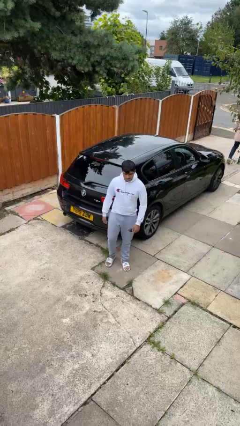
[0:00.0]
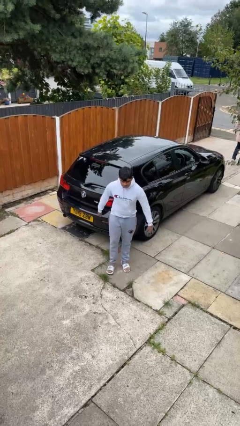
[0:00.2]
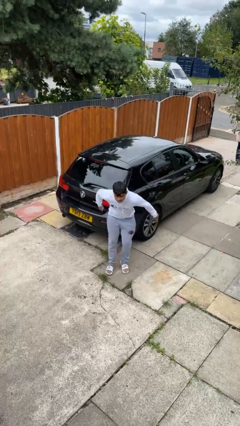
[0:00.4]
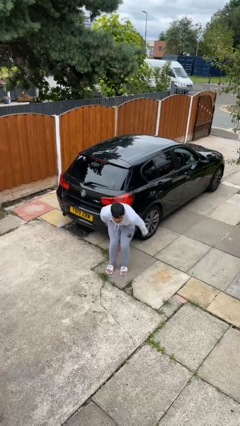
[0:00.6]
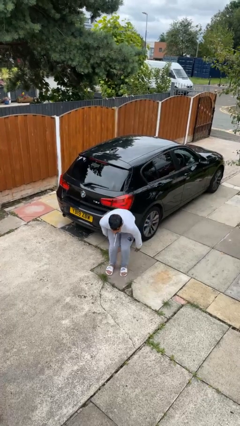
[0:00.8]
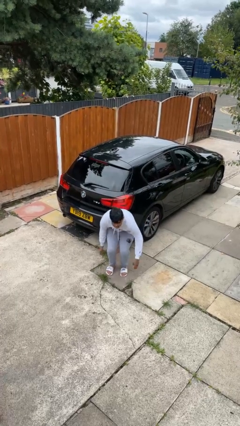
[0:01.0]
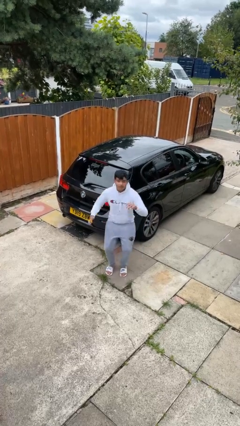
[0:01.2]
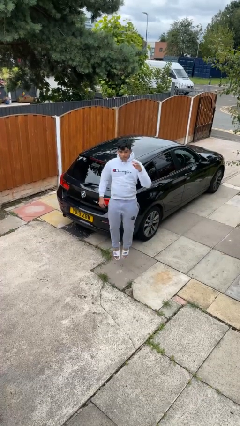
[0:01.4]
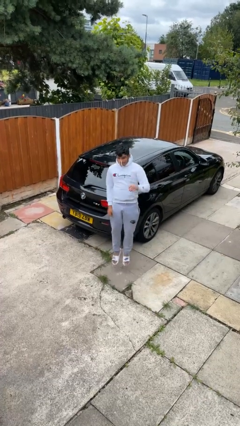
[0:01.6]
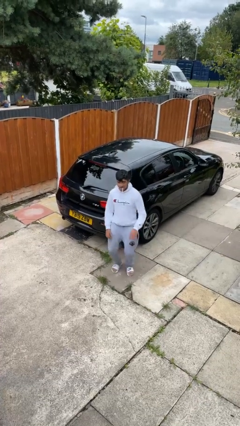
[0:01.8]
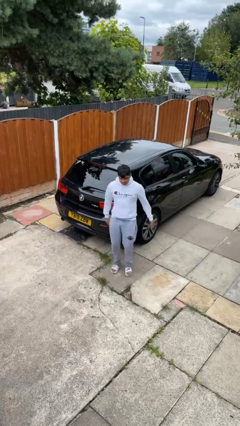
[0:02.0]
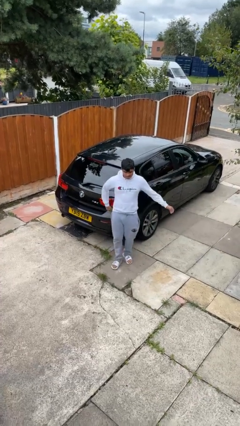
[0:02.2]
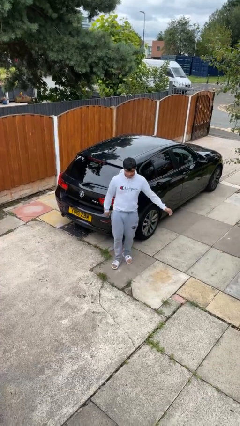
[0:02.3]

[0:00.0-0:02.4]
person jumps

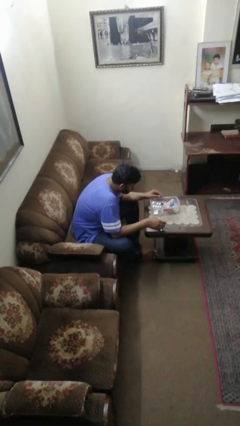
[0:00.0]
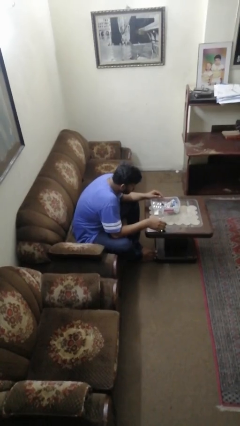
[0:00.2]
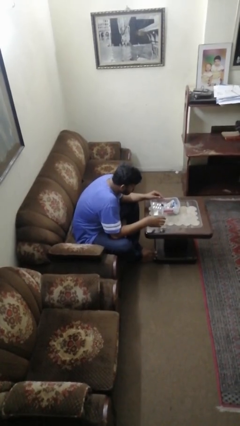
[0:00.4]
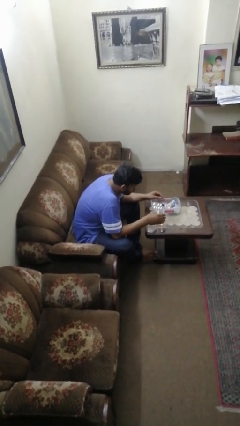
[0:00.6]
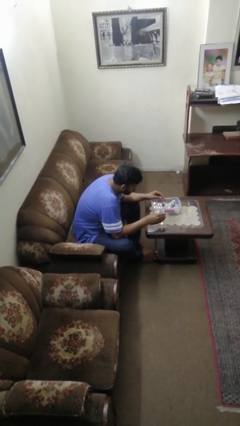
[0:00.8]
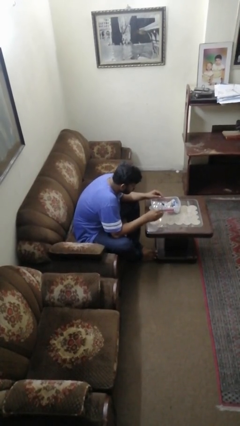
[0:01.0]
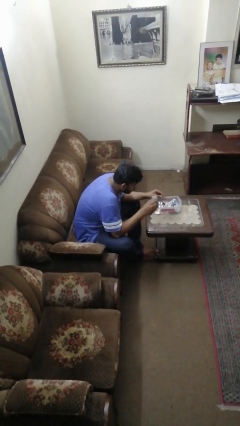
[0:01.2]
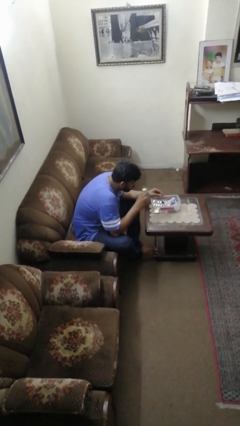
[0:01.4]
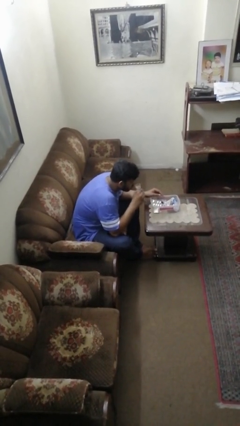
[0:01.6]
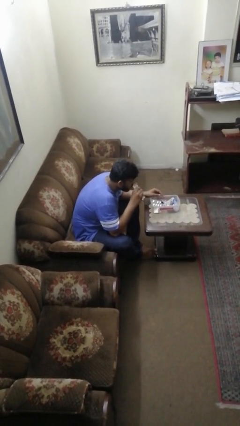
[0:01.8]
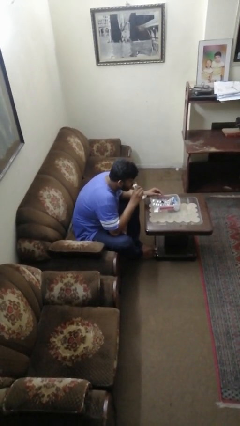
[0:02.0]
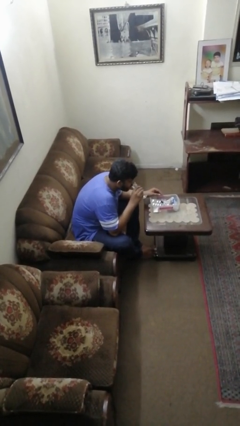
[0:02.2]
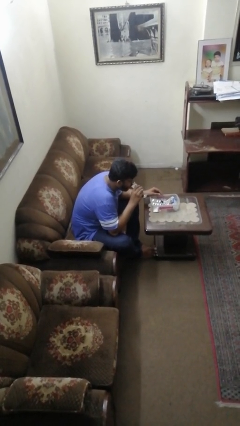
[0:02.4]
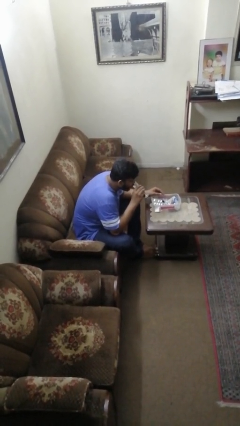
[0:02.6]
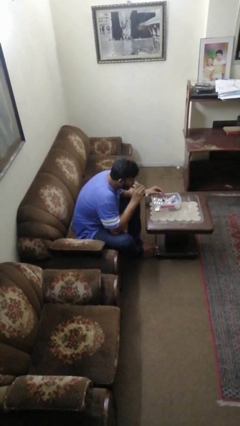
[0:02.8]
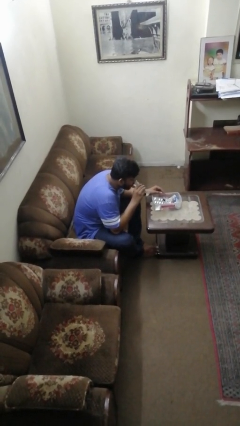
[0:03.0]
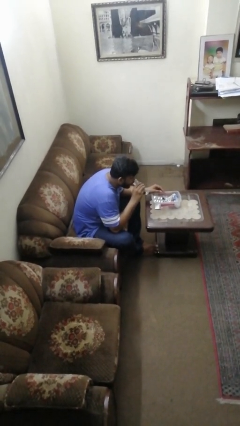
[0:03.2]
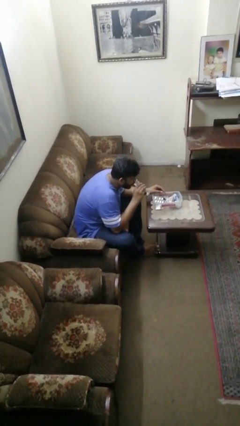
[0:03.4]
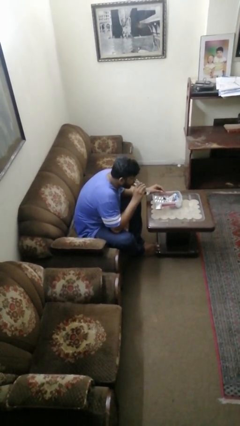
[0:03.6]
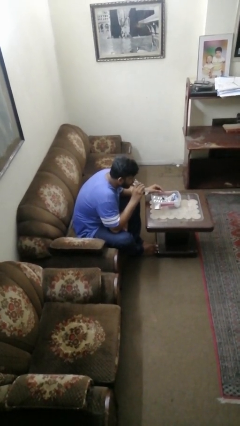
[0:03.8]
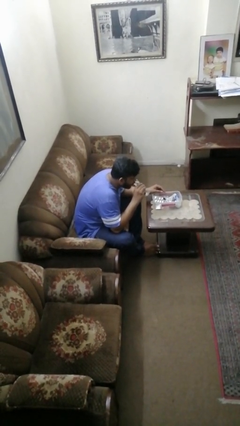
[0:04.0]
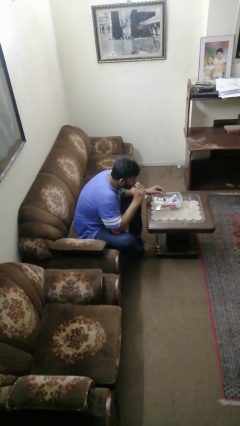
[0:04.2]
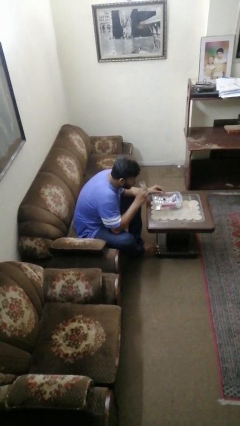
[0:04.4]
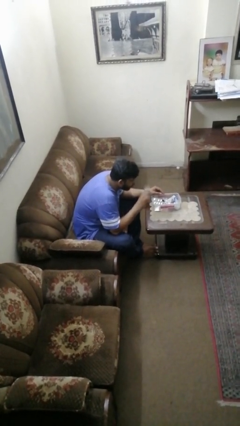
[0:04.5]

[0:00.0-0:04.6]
person drinks from cup

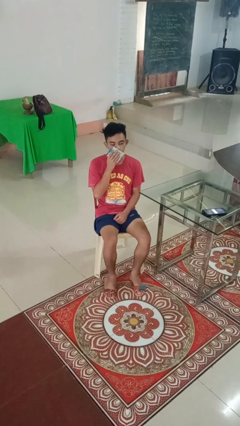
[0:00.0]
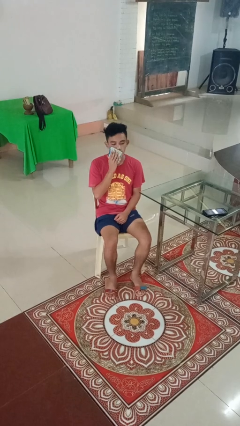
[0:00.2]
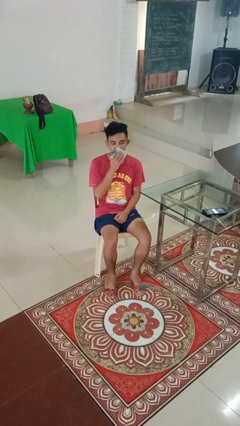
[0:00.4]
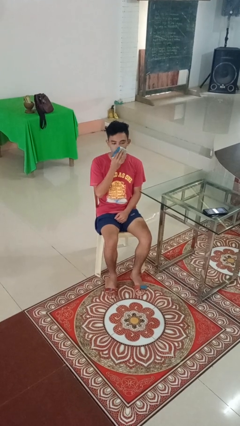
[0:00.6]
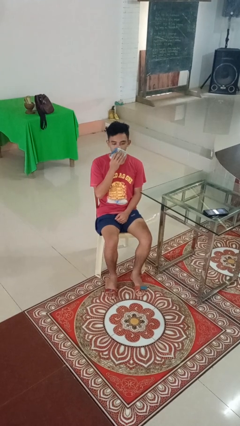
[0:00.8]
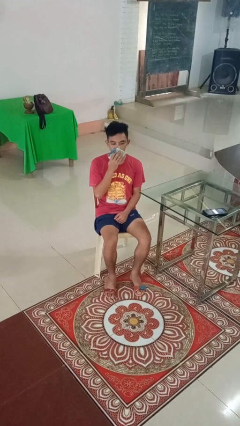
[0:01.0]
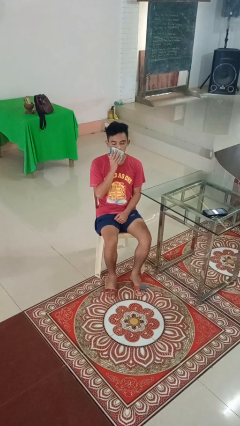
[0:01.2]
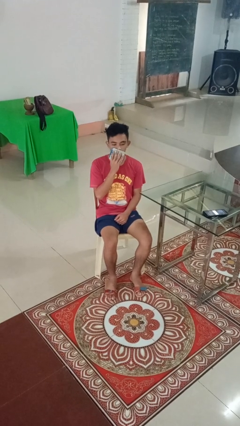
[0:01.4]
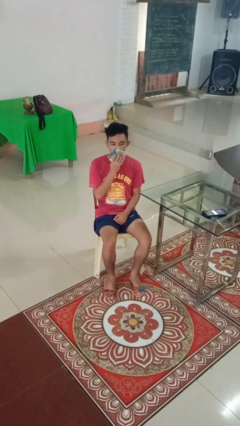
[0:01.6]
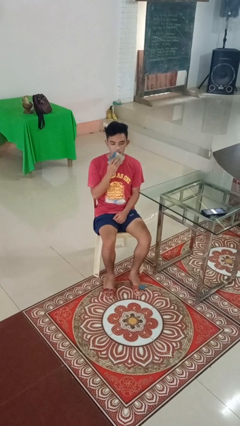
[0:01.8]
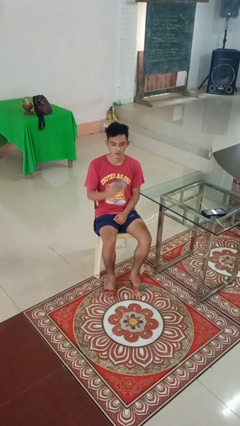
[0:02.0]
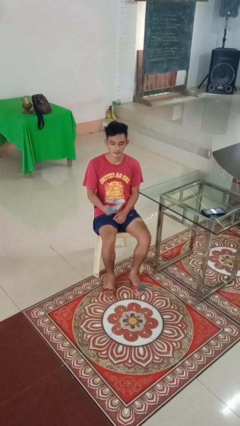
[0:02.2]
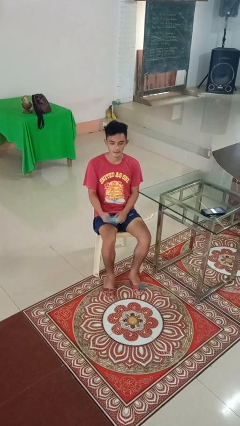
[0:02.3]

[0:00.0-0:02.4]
person wipes mouth with napkin

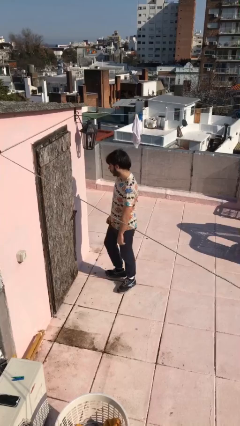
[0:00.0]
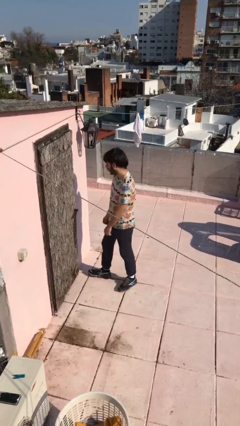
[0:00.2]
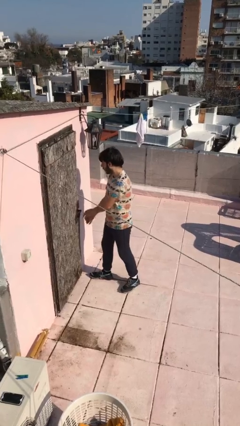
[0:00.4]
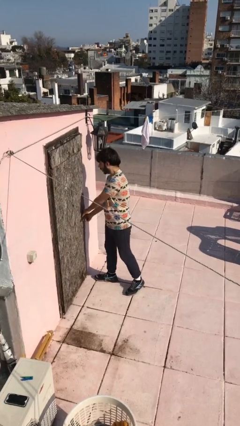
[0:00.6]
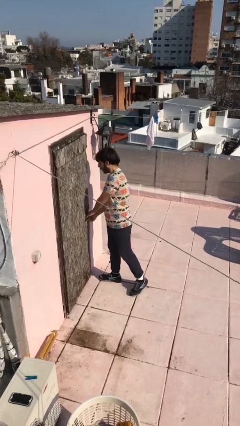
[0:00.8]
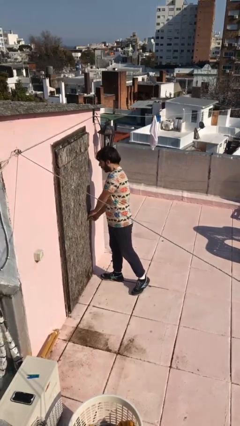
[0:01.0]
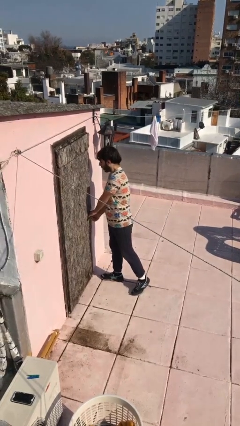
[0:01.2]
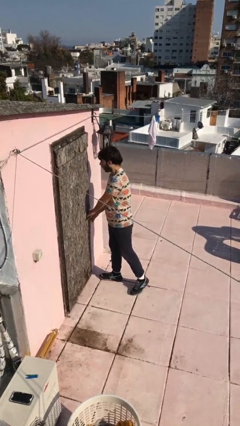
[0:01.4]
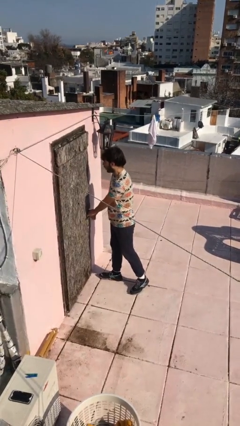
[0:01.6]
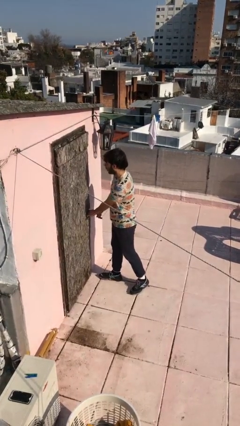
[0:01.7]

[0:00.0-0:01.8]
person unlocks door with keys

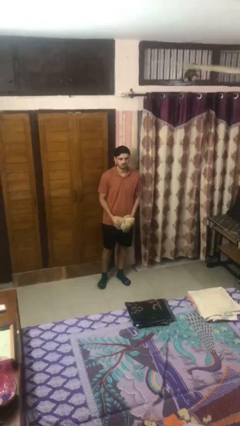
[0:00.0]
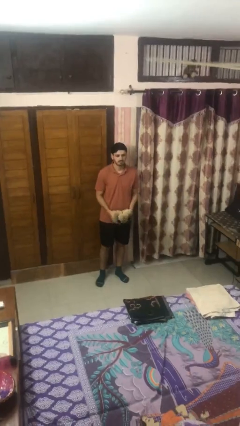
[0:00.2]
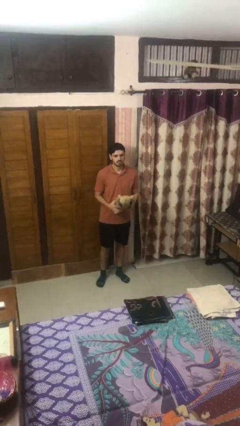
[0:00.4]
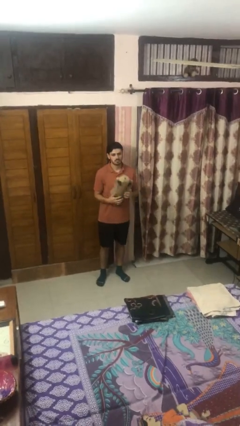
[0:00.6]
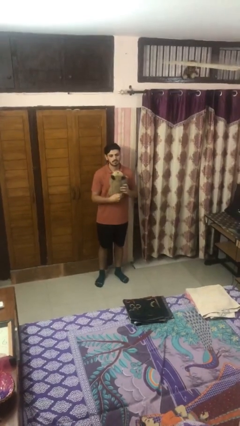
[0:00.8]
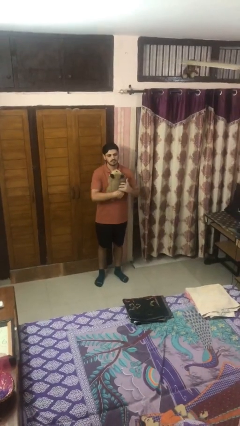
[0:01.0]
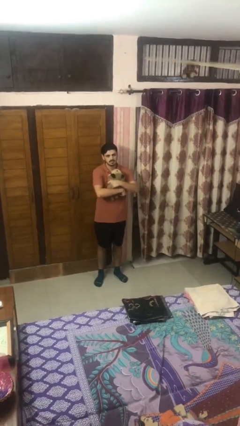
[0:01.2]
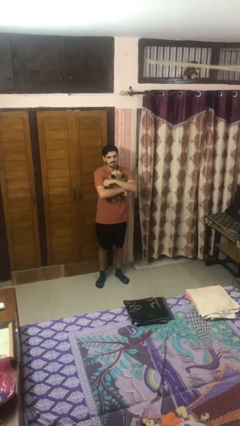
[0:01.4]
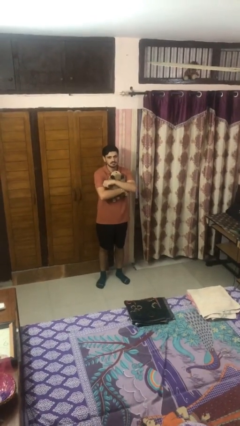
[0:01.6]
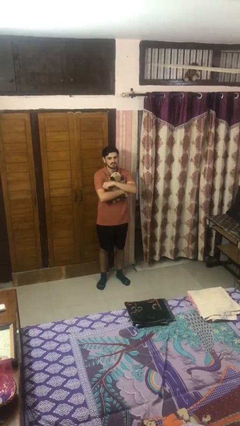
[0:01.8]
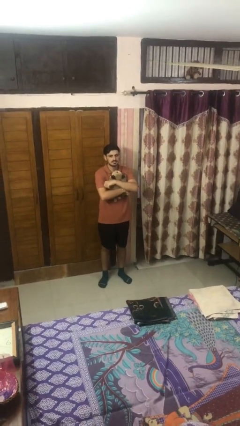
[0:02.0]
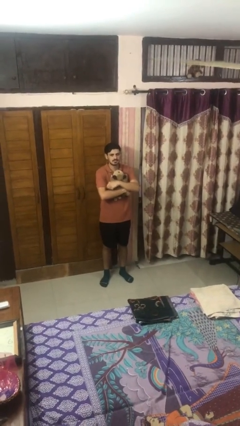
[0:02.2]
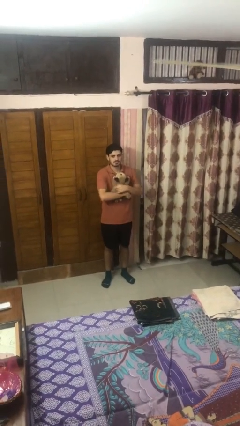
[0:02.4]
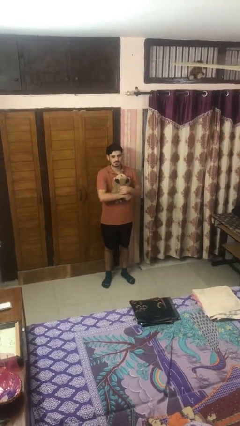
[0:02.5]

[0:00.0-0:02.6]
person hugs stuffed animal

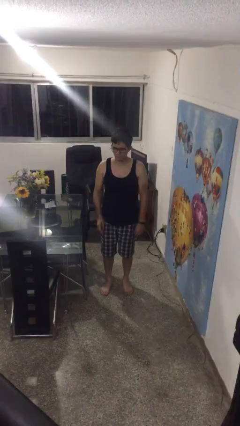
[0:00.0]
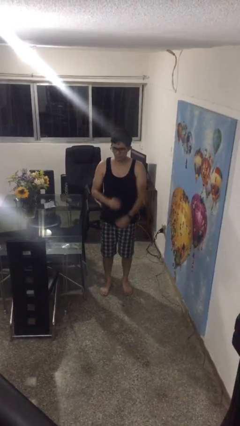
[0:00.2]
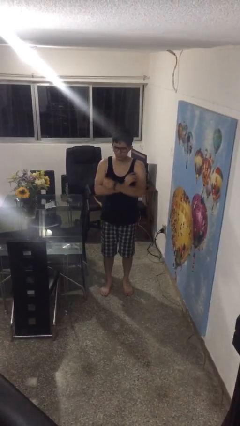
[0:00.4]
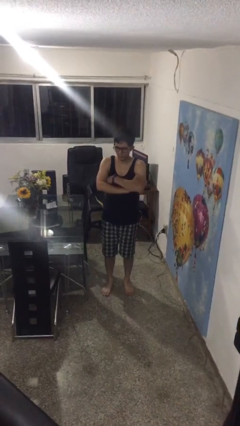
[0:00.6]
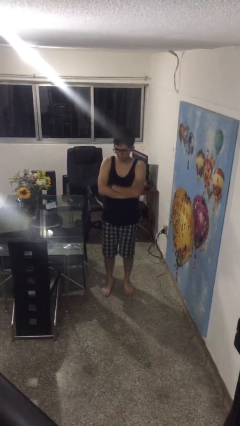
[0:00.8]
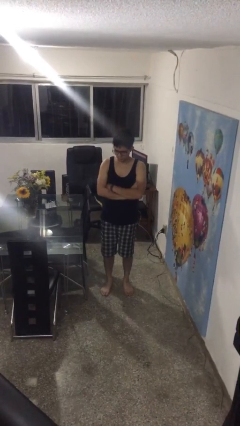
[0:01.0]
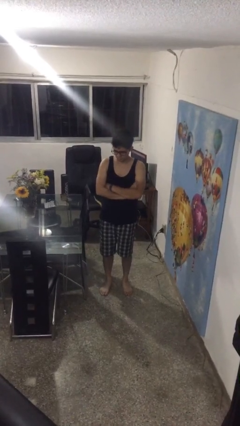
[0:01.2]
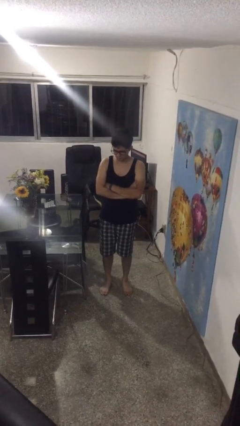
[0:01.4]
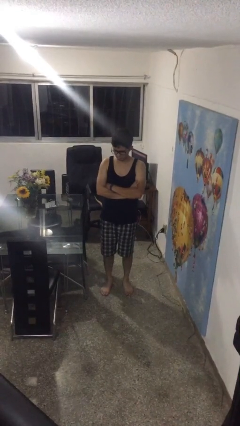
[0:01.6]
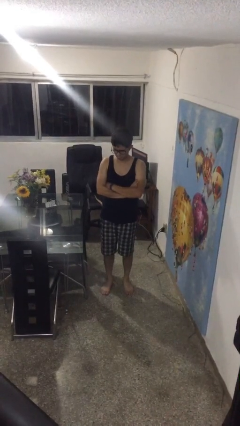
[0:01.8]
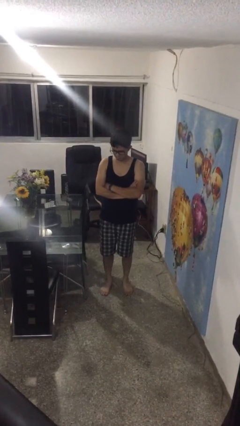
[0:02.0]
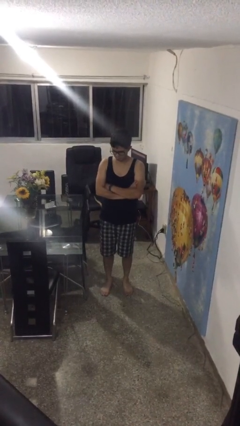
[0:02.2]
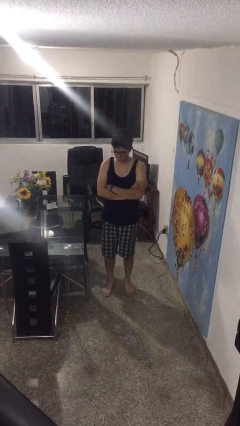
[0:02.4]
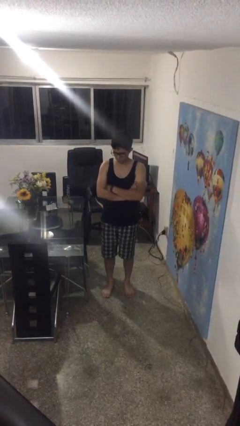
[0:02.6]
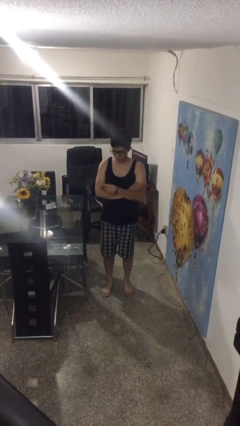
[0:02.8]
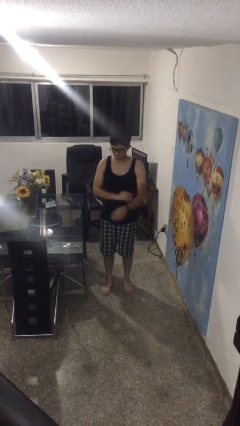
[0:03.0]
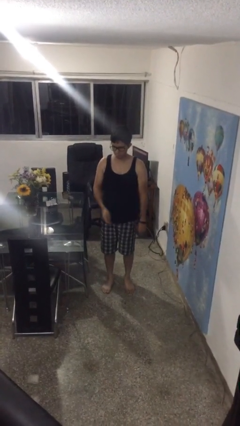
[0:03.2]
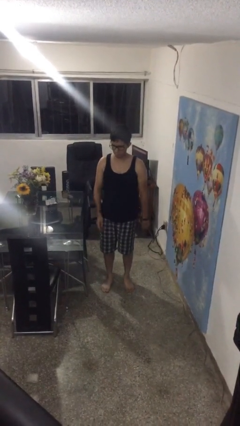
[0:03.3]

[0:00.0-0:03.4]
person crosses arms

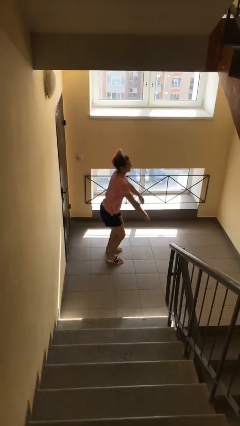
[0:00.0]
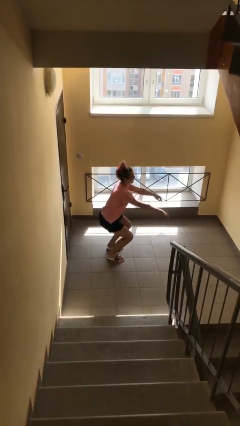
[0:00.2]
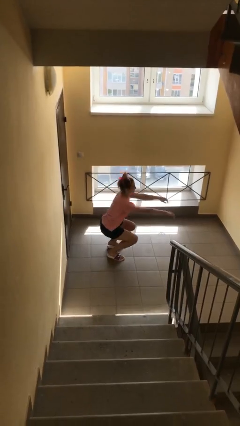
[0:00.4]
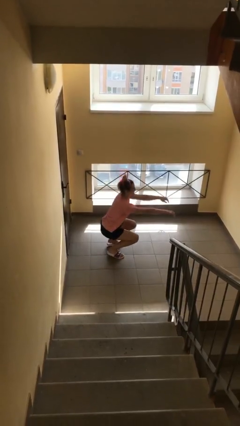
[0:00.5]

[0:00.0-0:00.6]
person squats
